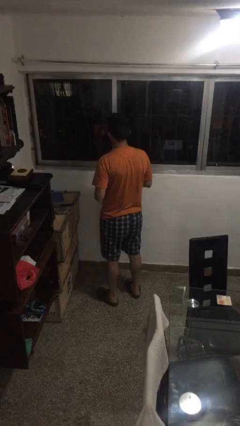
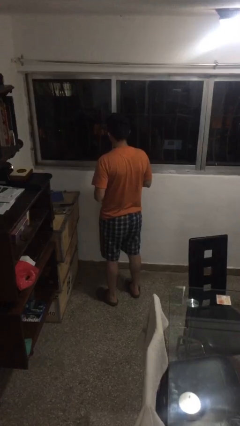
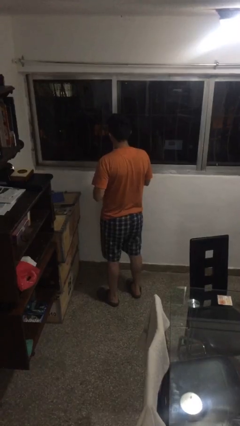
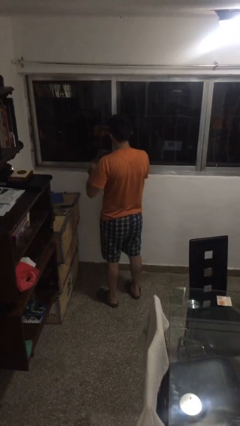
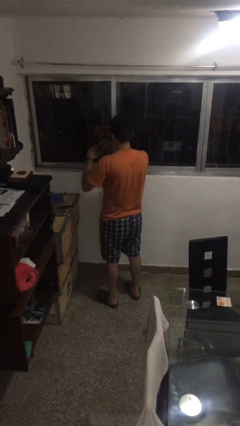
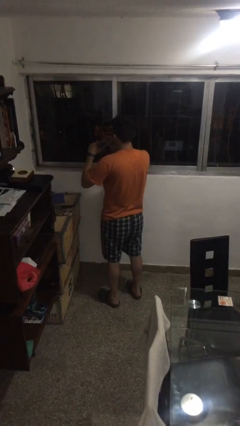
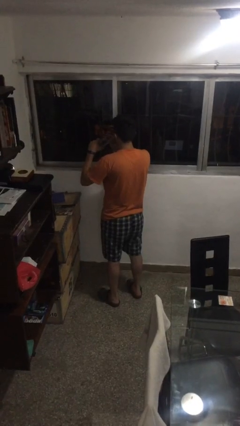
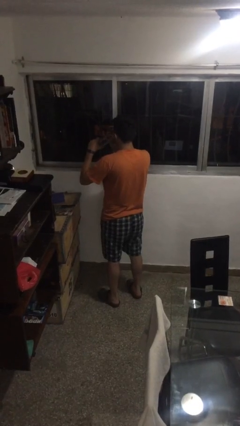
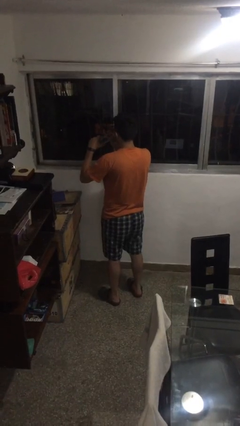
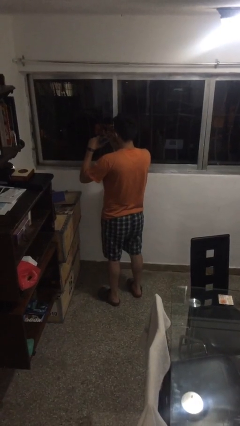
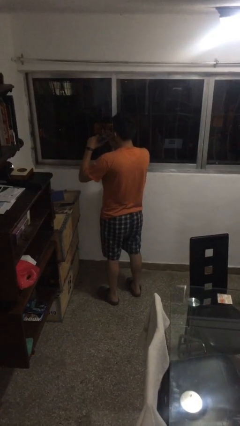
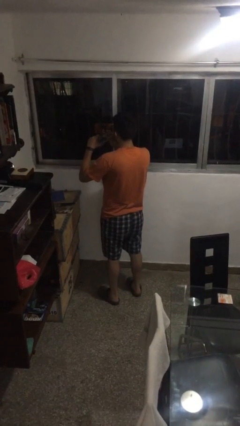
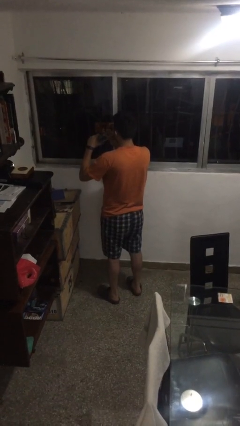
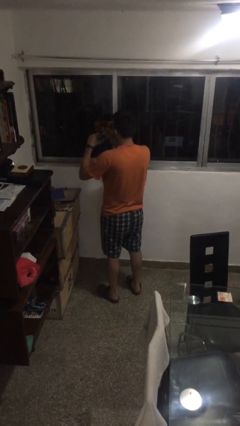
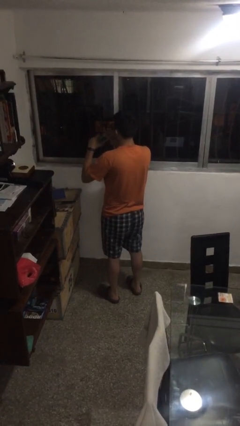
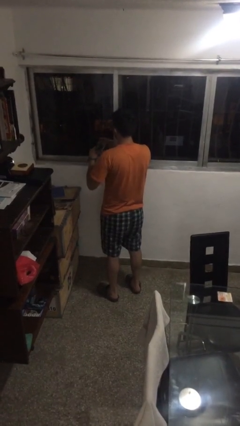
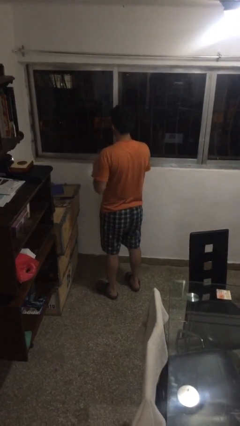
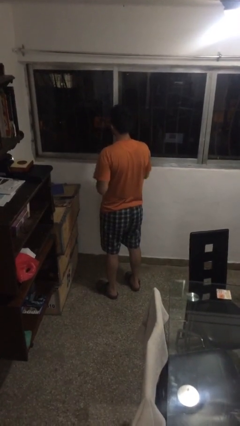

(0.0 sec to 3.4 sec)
person drinks from straw

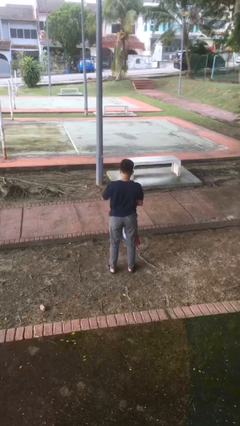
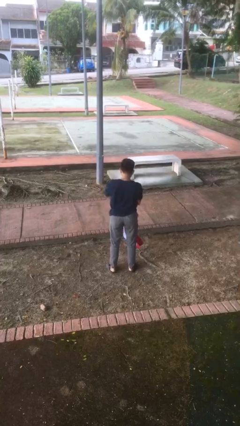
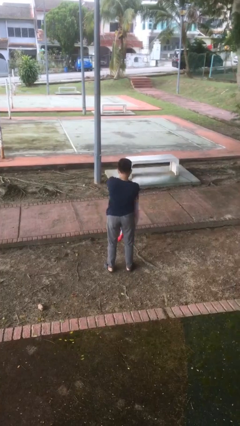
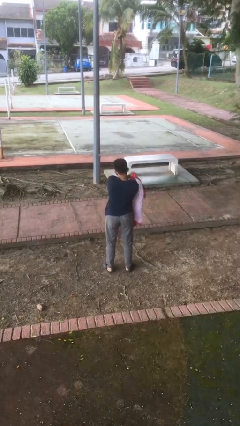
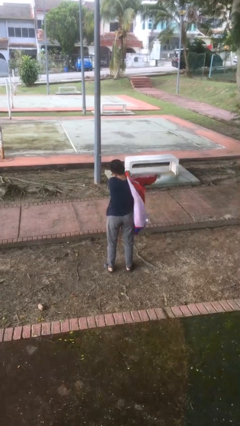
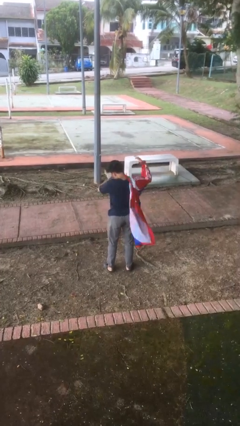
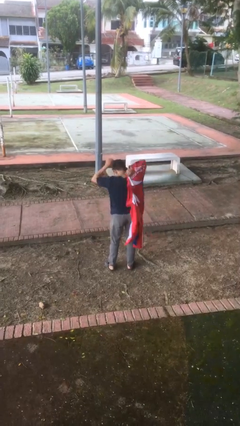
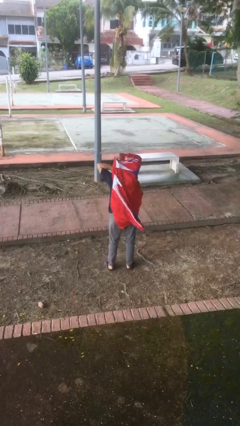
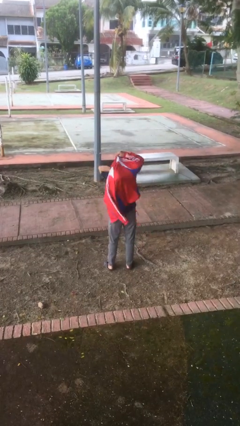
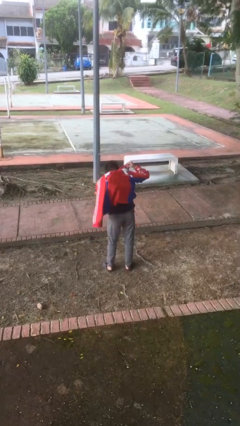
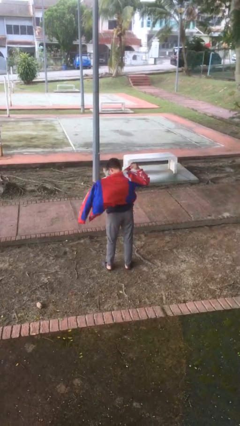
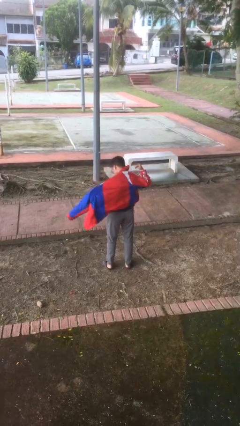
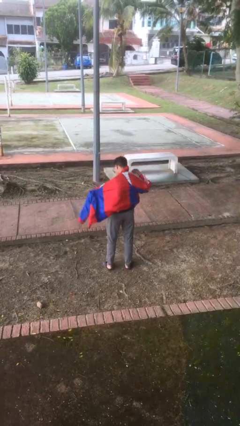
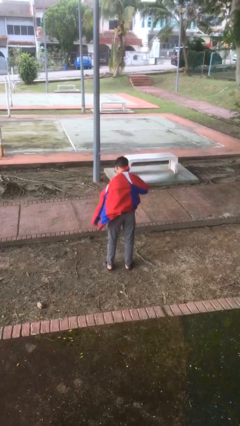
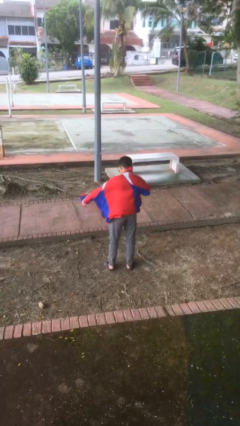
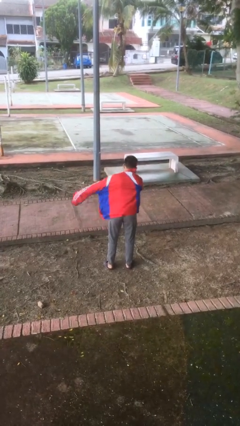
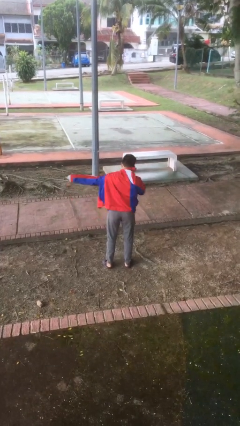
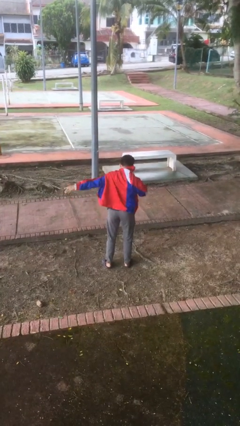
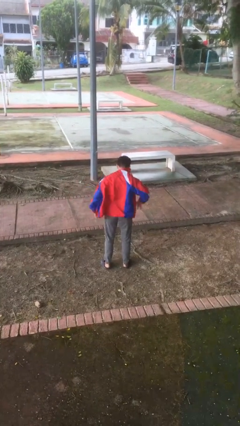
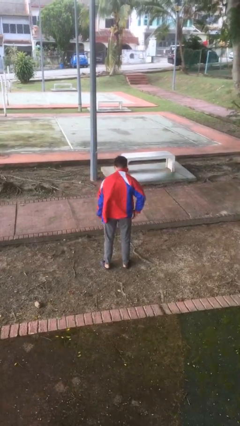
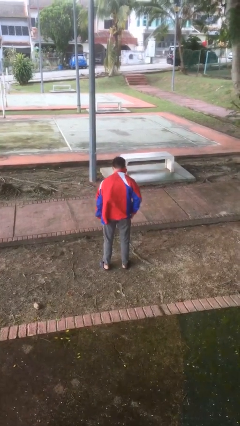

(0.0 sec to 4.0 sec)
person puts on jacket

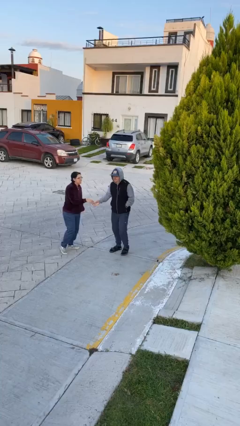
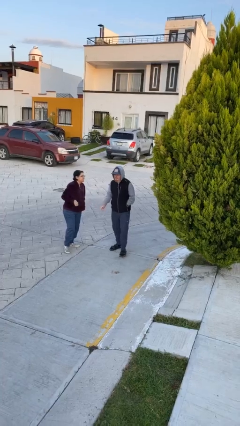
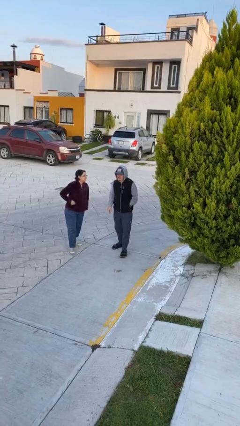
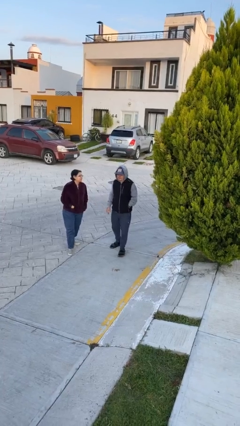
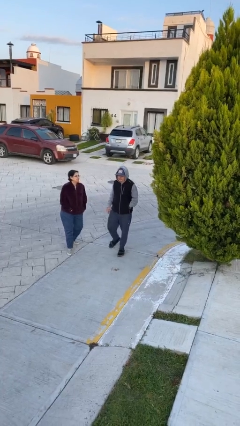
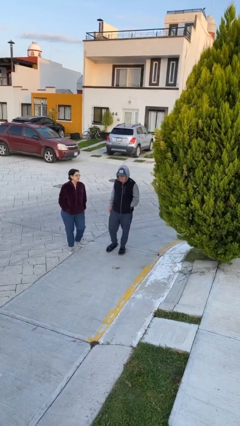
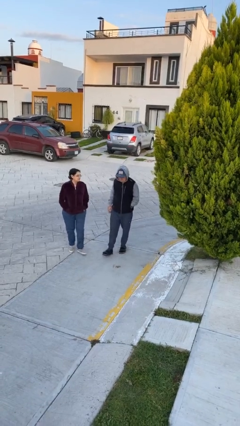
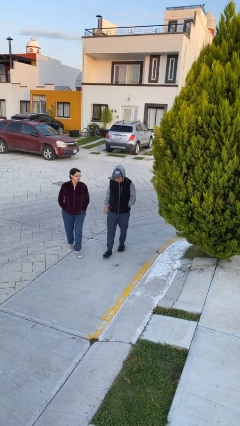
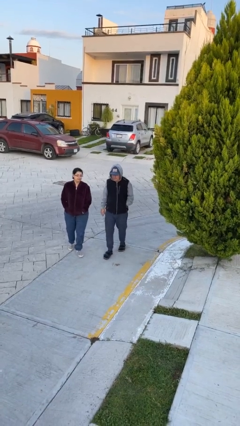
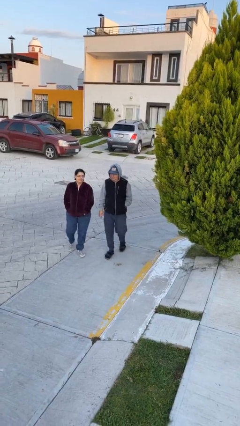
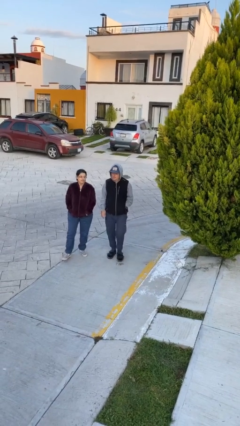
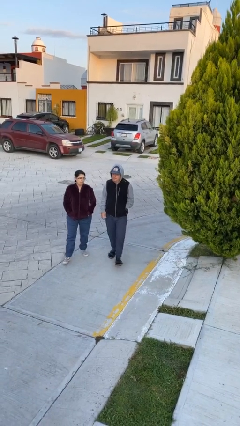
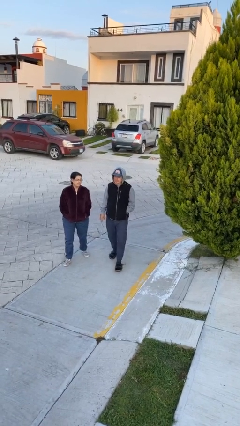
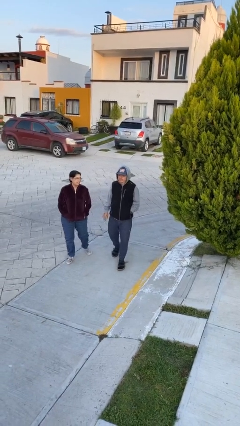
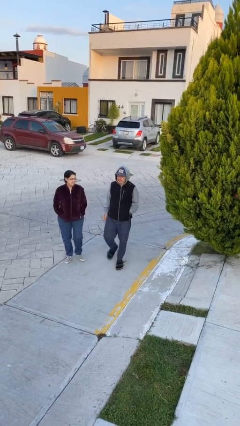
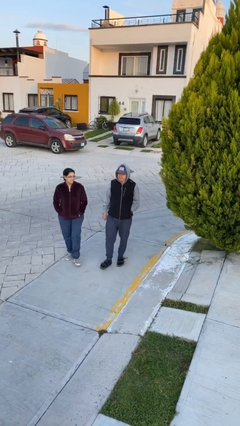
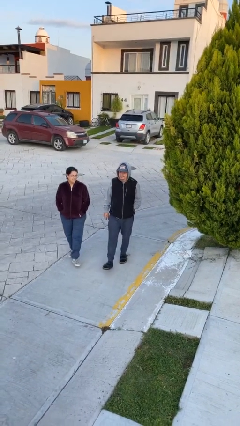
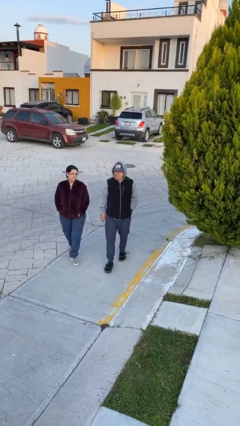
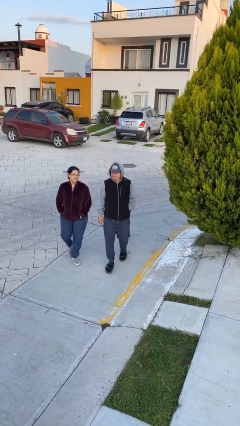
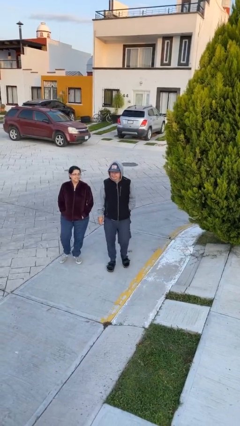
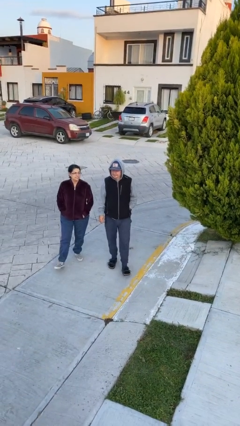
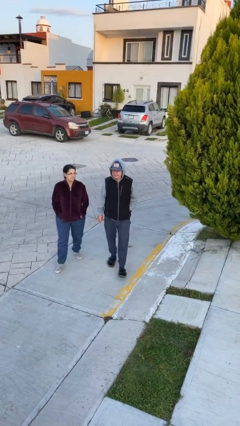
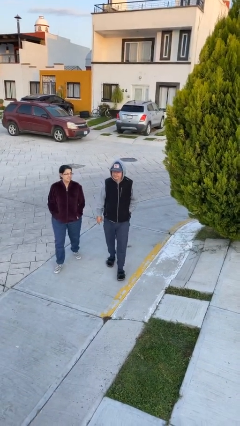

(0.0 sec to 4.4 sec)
person talks to person

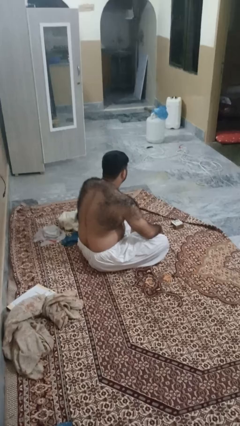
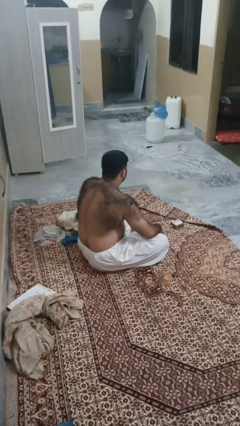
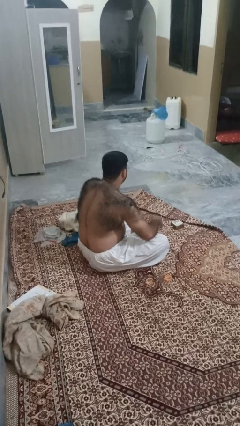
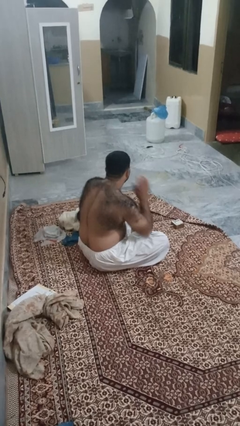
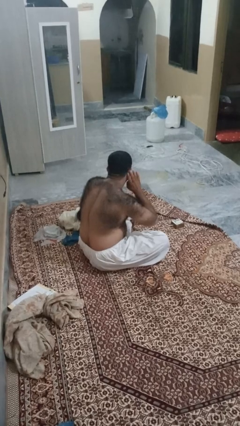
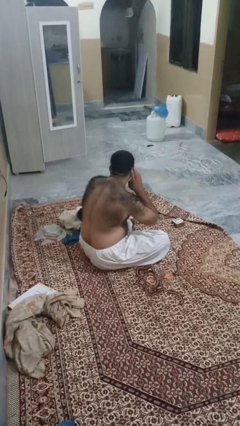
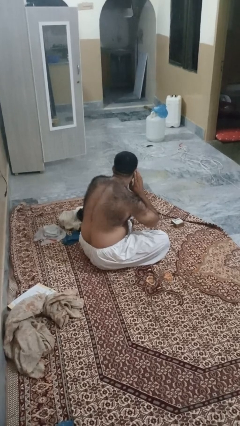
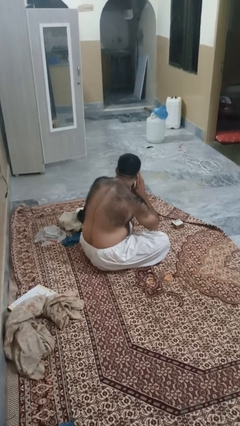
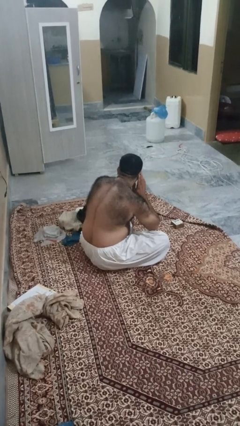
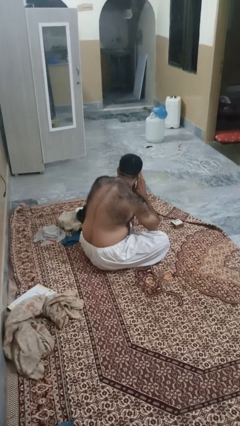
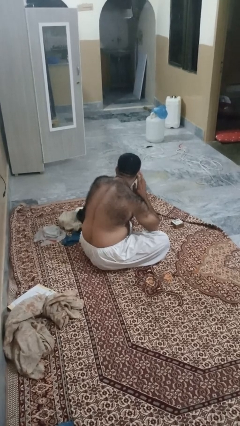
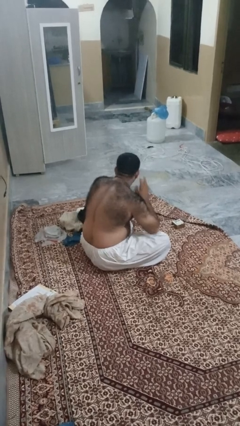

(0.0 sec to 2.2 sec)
person gestures listen closely

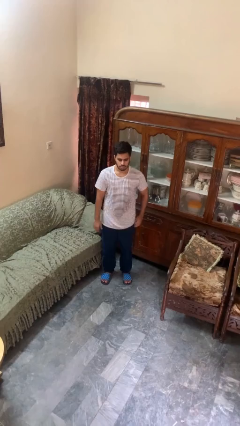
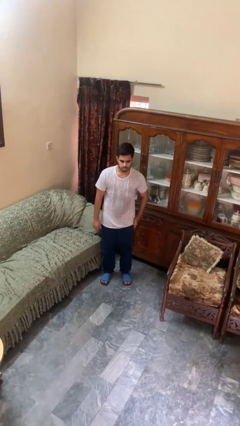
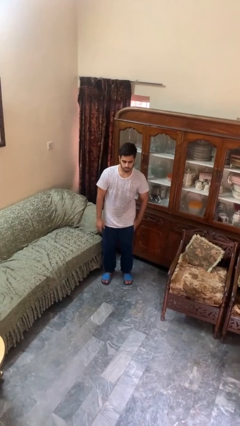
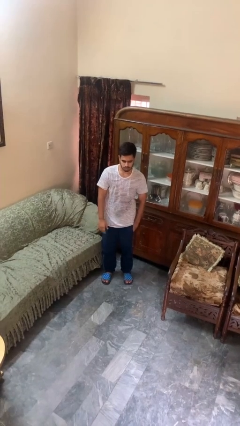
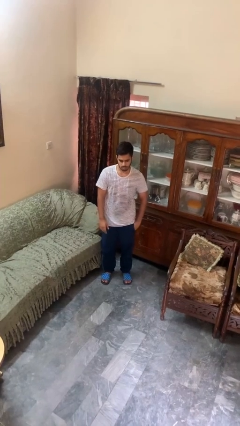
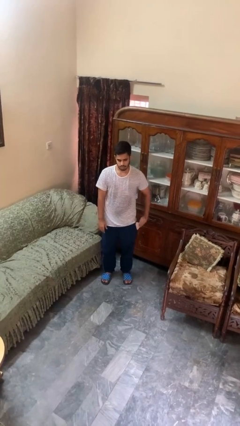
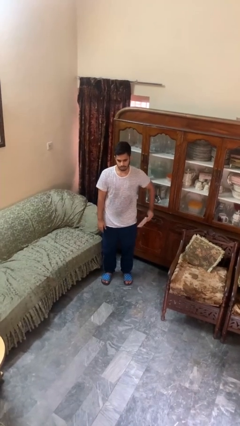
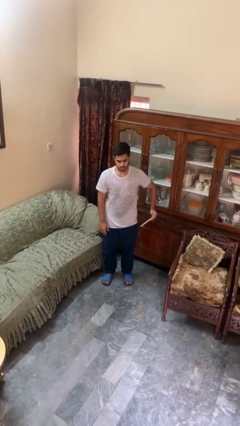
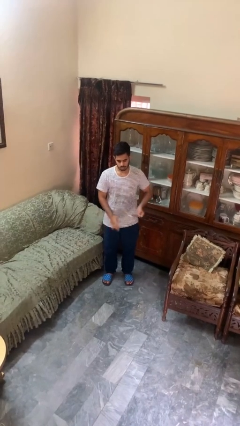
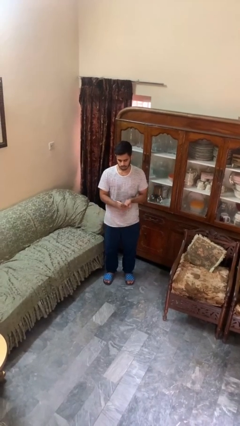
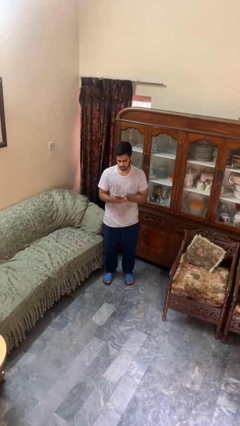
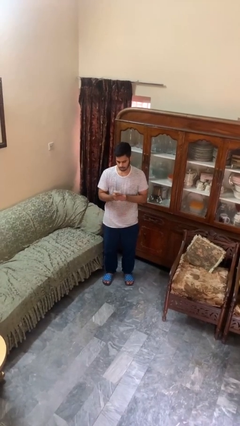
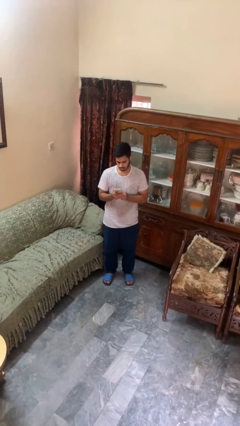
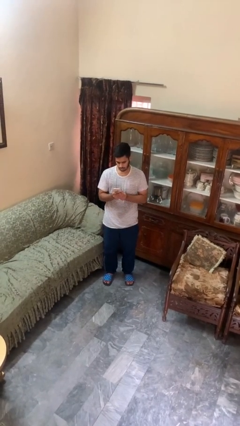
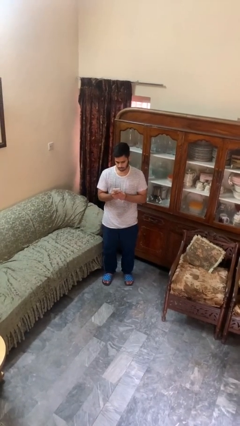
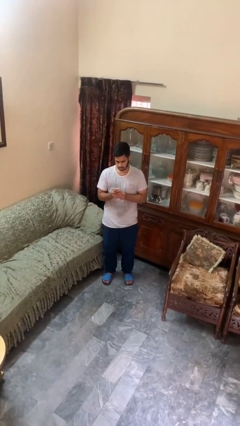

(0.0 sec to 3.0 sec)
person takes phone from pocket

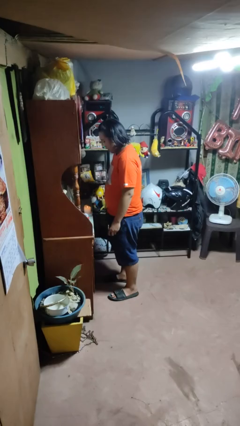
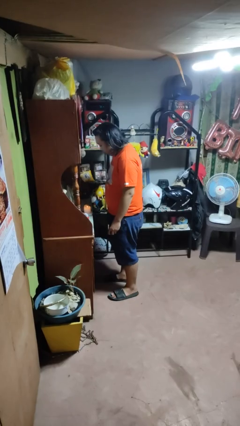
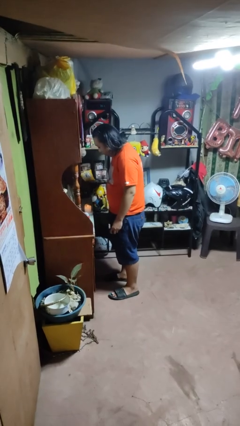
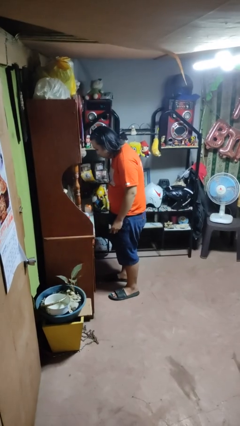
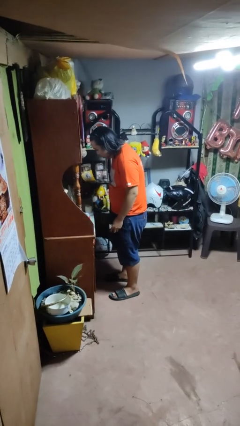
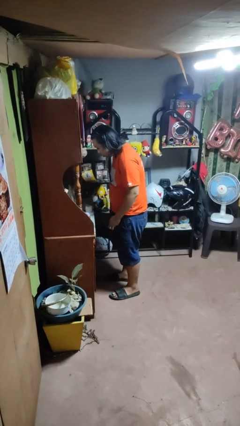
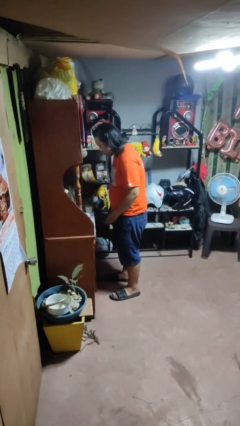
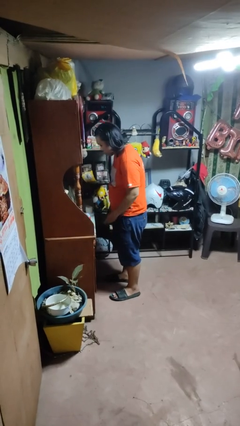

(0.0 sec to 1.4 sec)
person extinguishes candle
